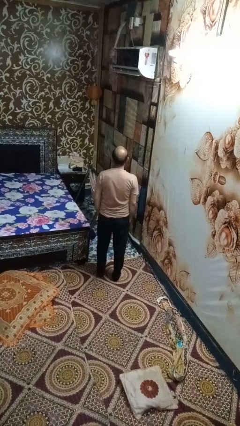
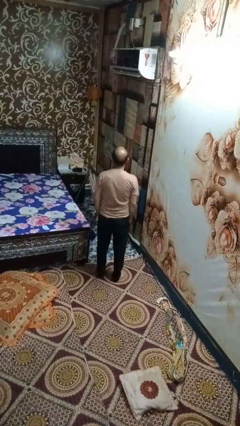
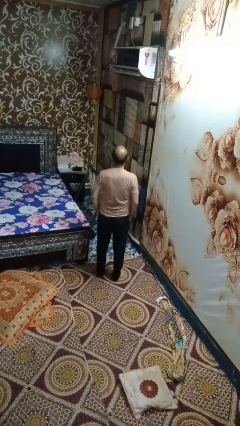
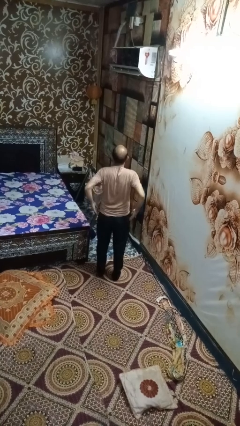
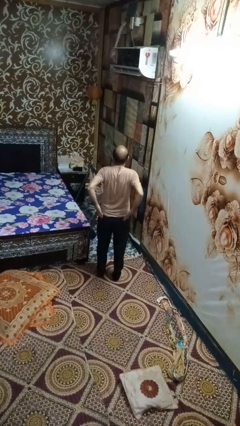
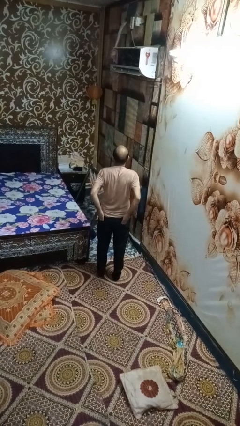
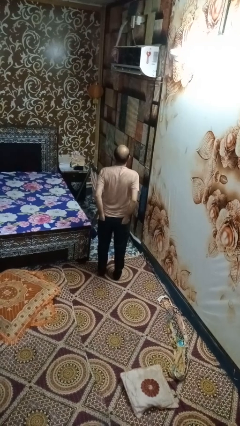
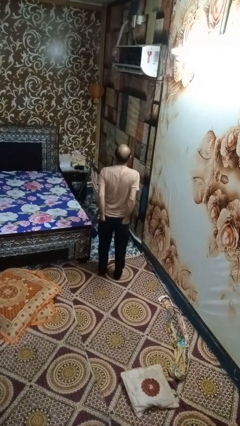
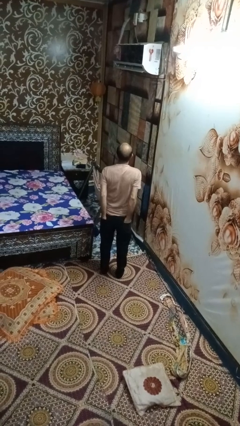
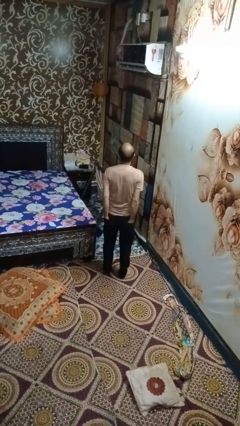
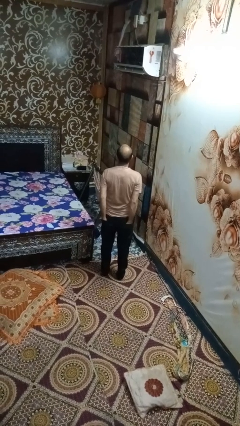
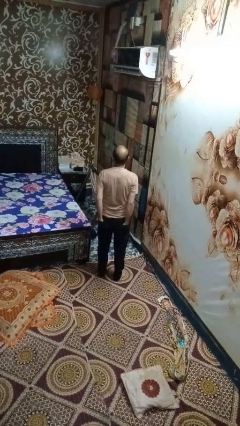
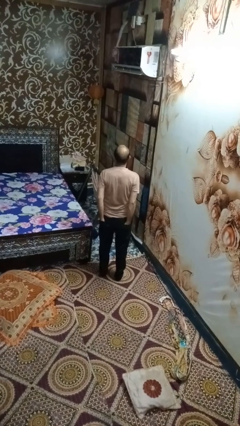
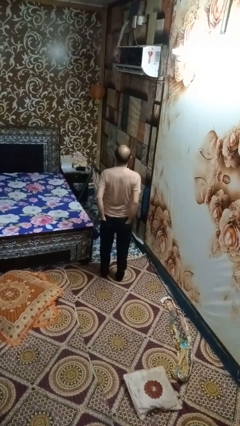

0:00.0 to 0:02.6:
person puts hands in back pockets

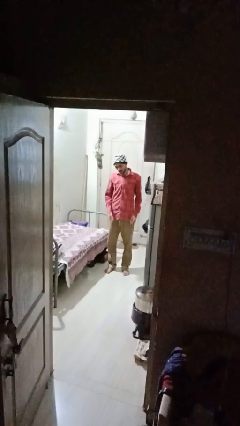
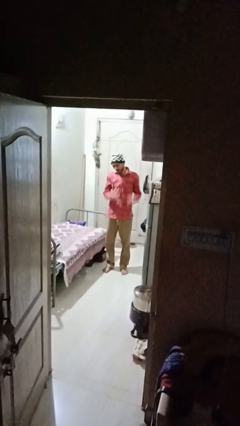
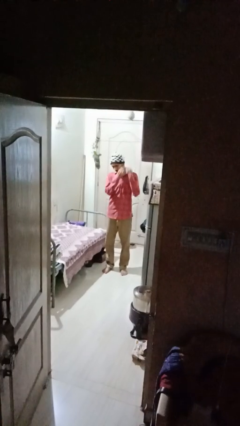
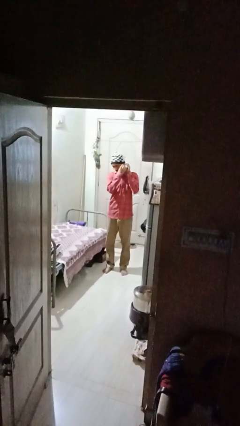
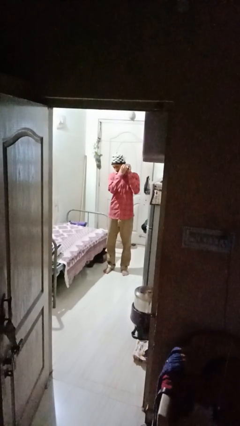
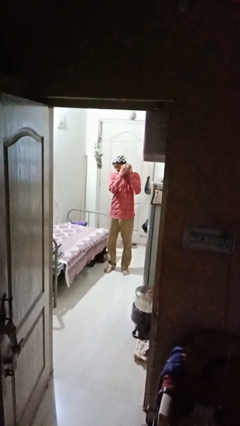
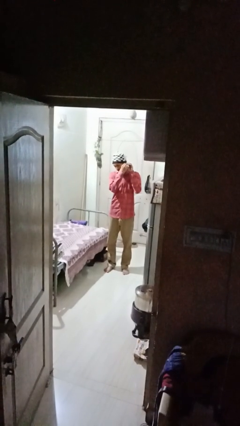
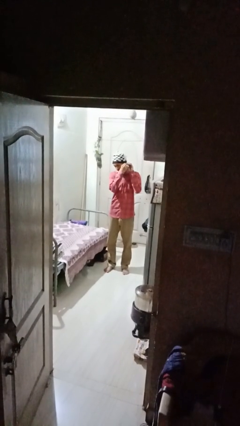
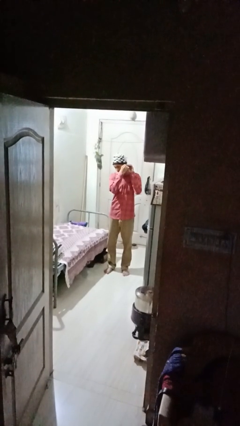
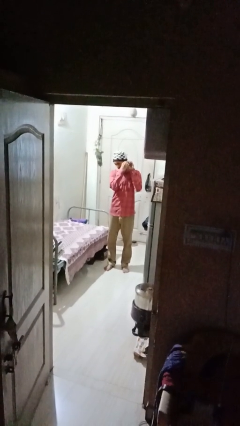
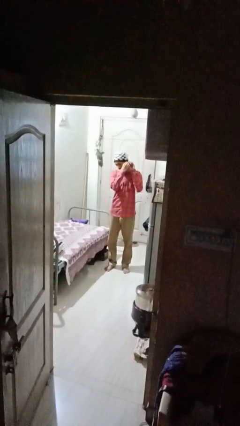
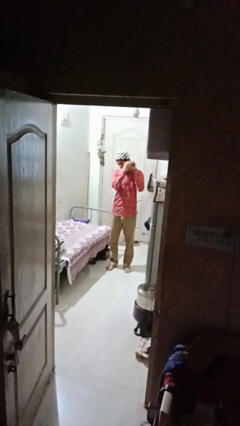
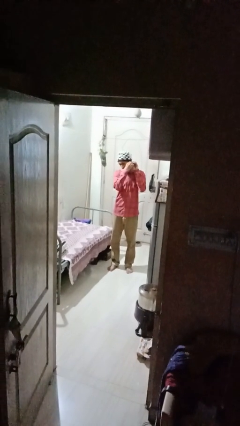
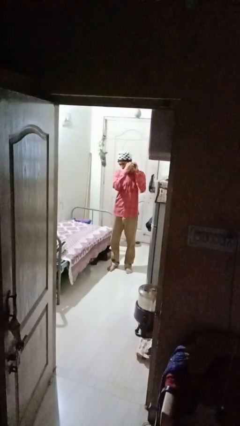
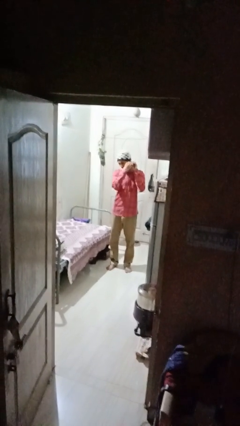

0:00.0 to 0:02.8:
person takes off earrings

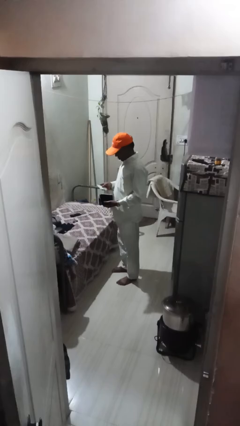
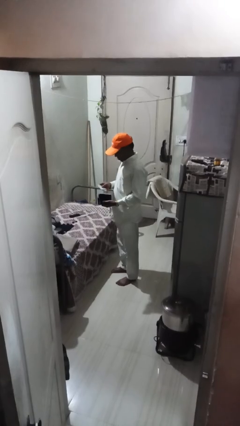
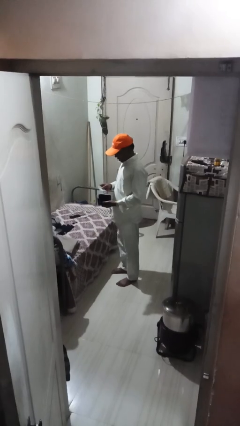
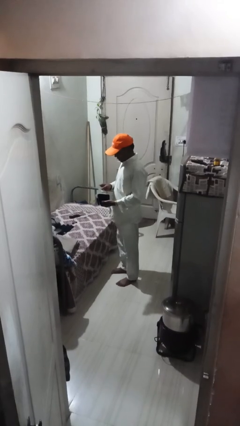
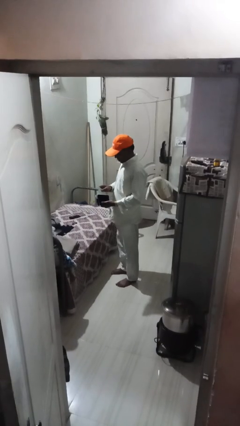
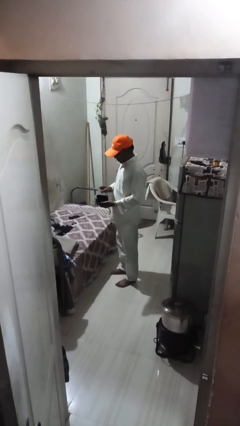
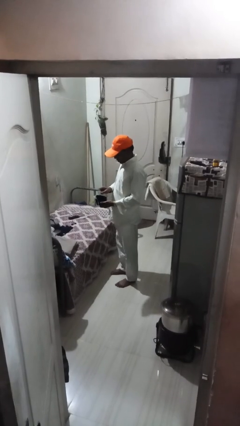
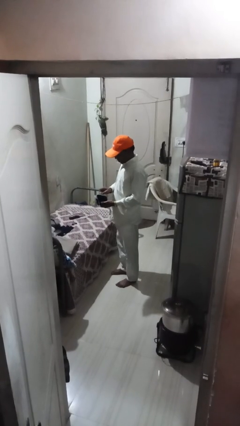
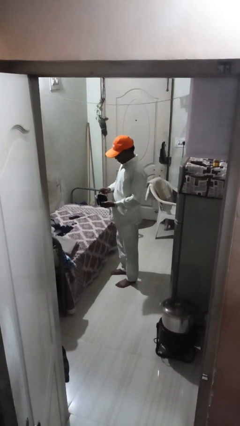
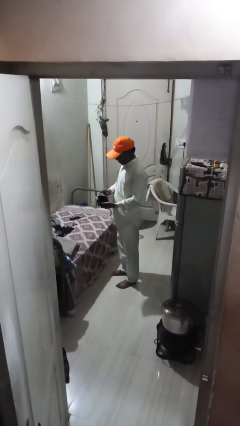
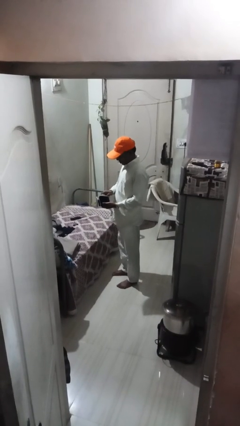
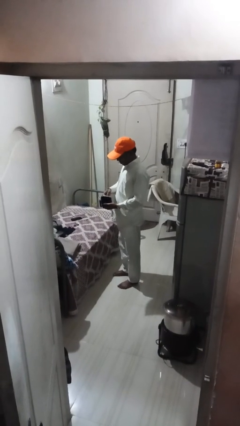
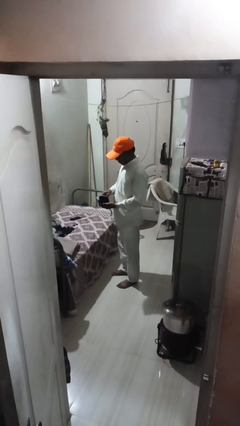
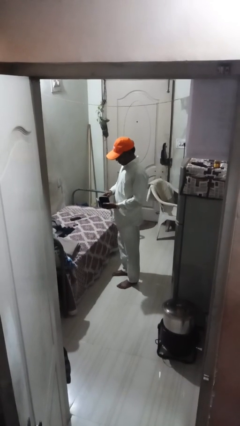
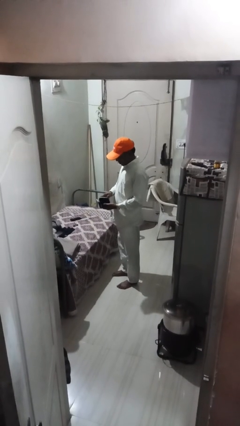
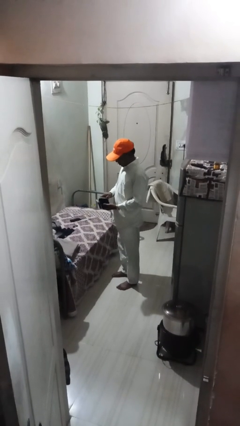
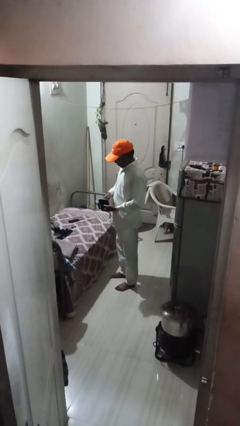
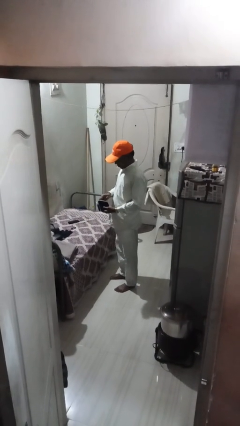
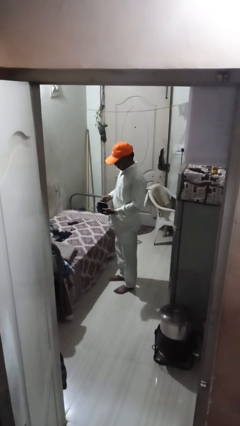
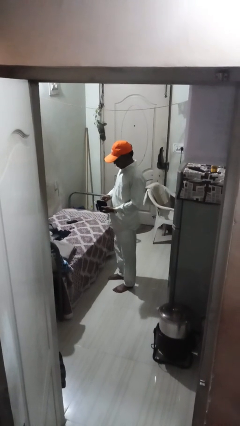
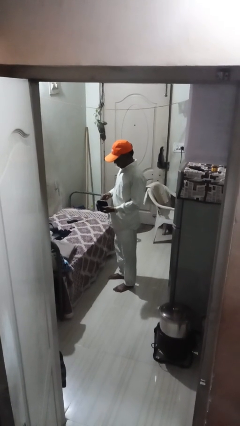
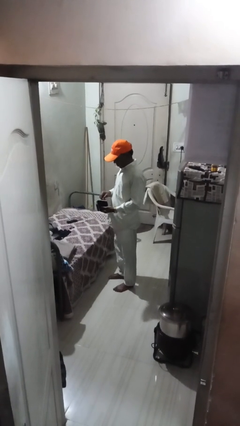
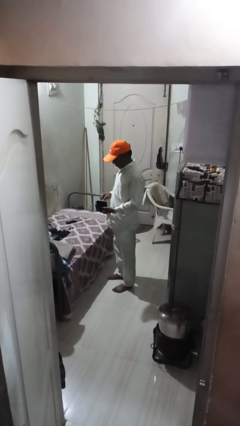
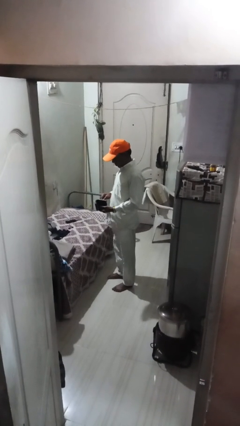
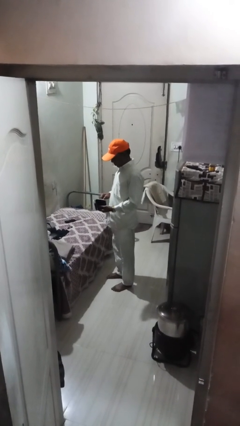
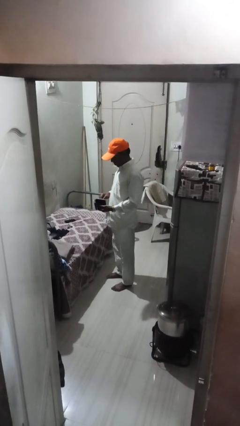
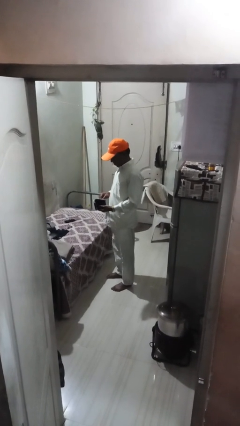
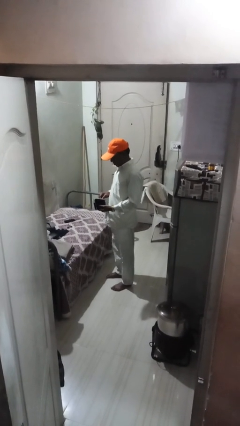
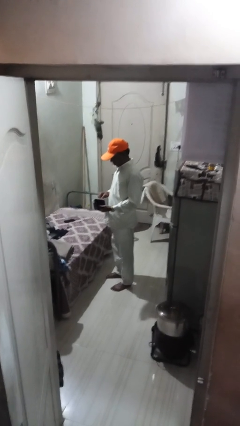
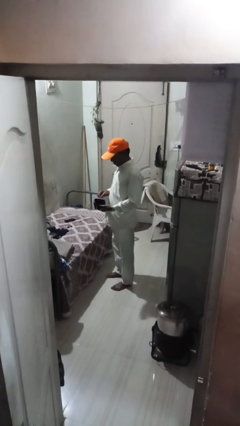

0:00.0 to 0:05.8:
person puts object into purse

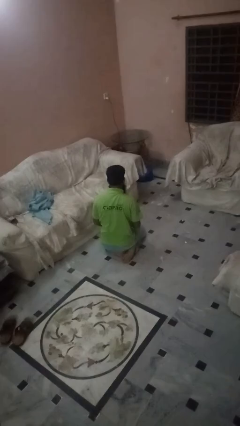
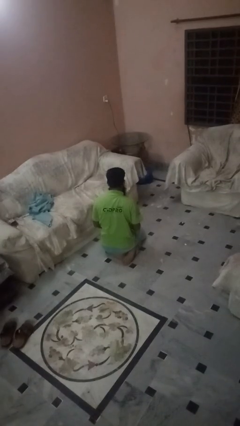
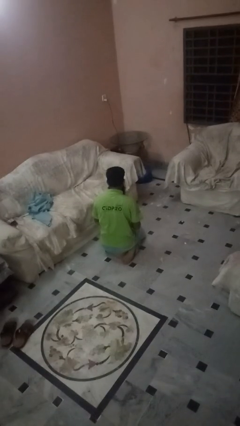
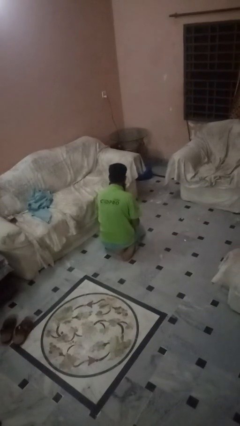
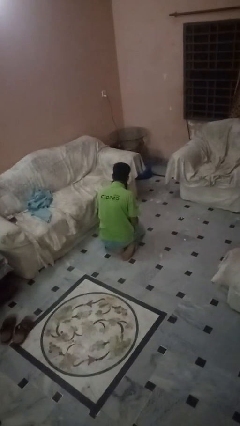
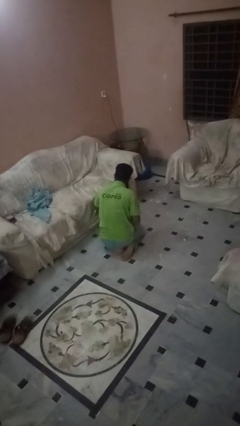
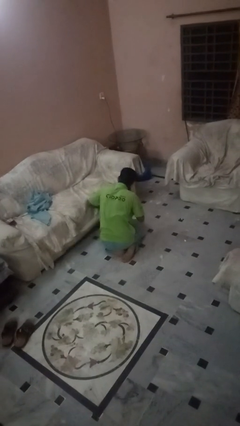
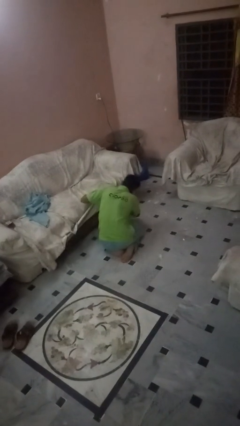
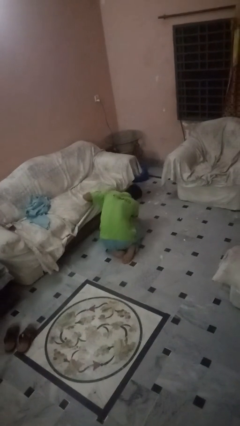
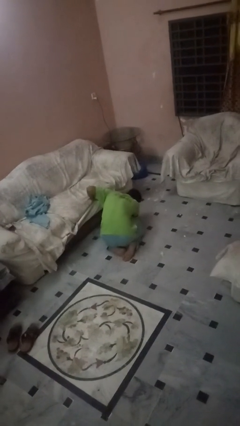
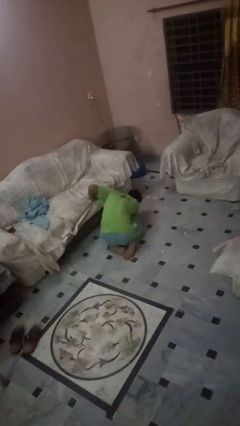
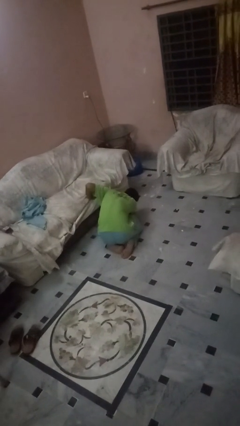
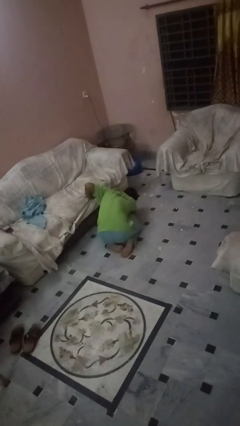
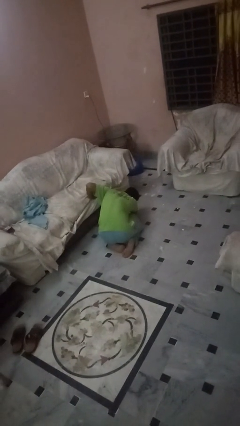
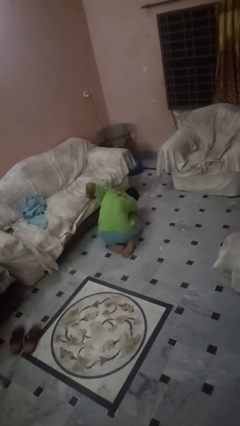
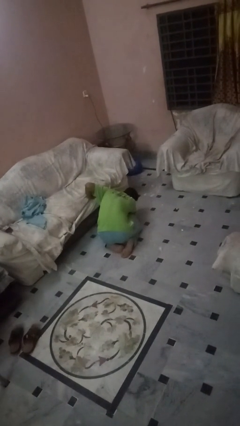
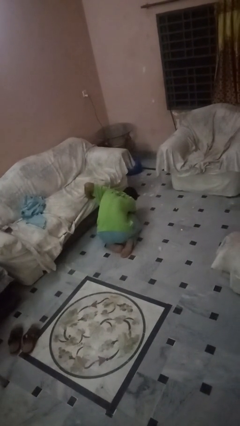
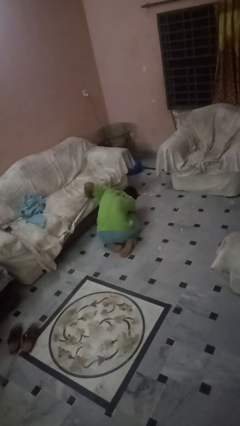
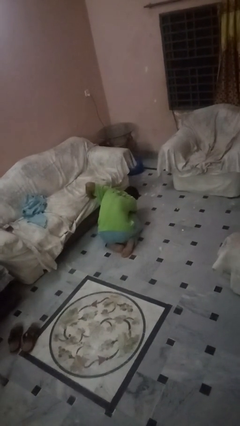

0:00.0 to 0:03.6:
person searches under couch

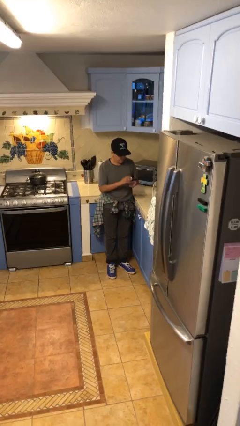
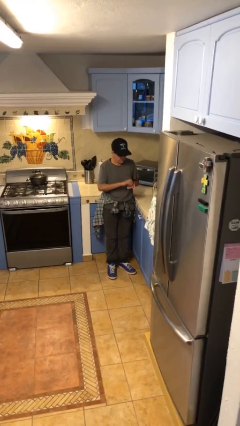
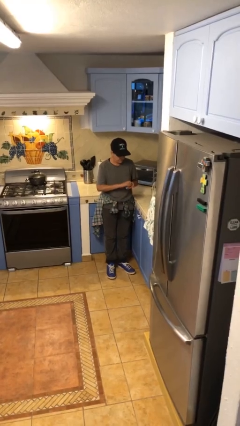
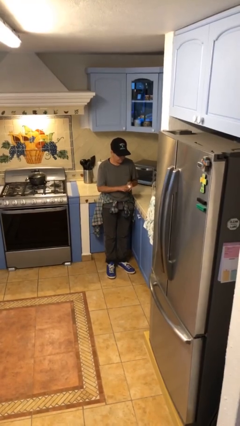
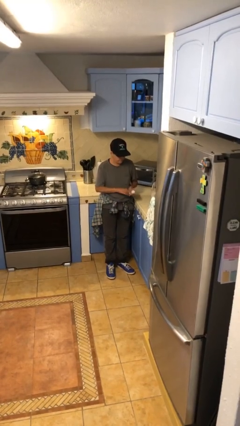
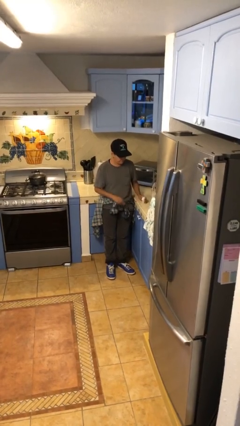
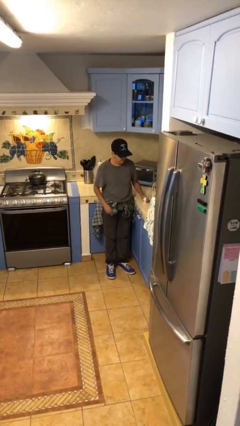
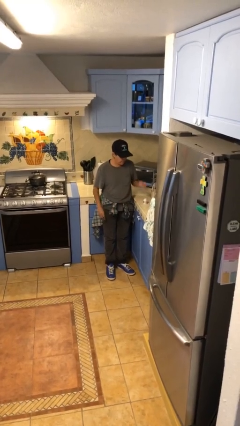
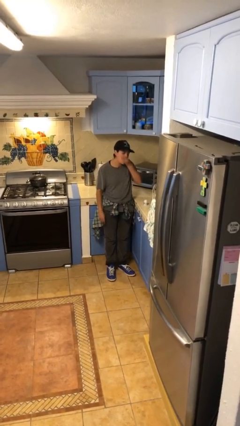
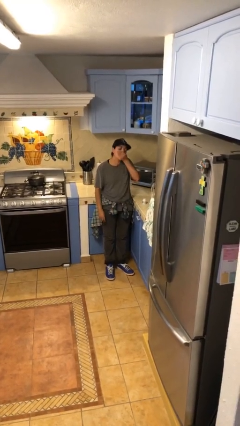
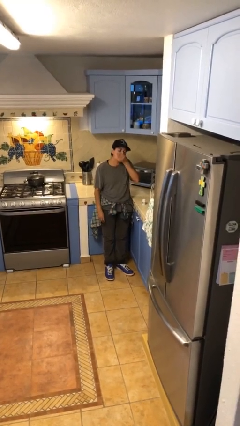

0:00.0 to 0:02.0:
person takes medicine pills

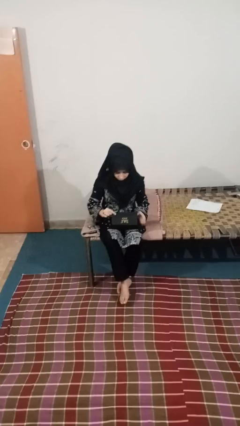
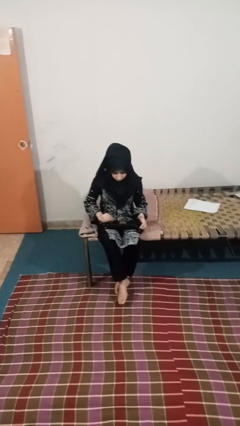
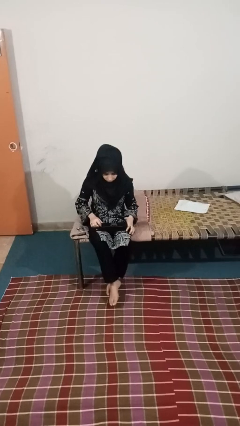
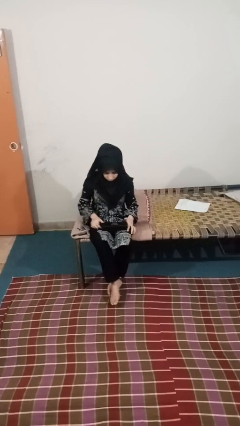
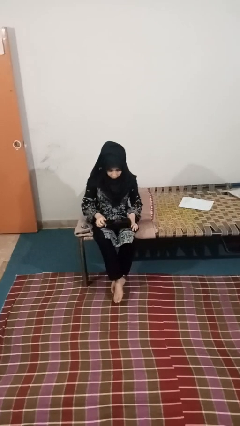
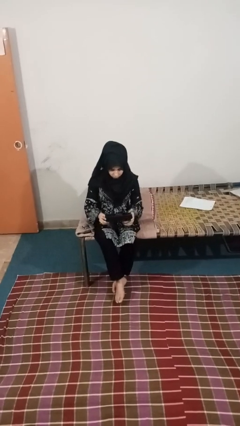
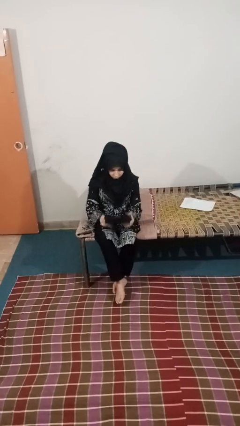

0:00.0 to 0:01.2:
person searches jewelry box
